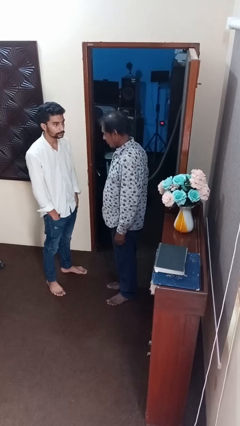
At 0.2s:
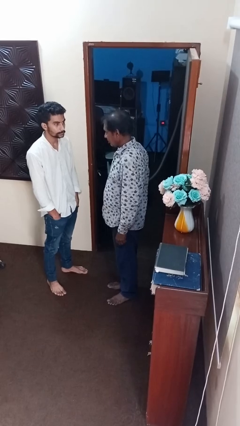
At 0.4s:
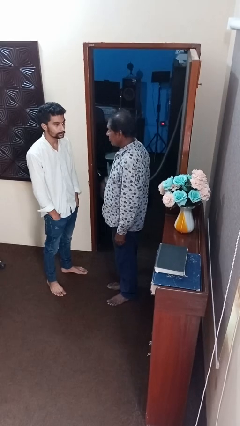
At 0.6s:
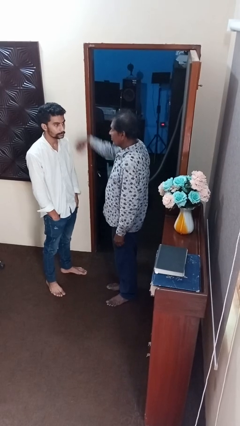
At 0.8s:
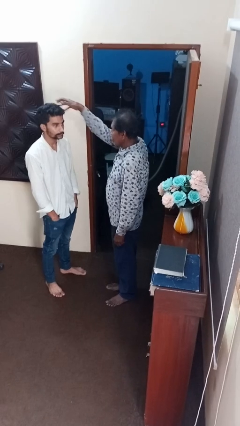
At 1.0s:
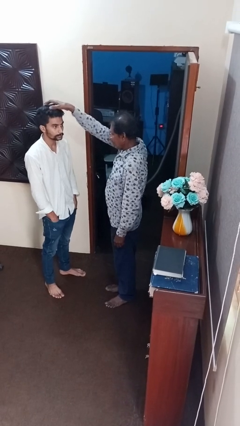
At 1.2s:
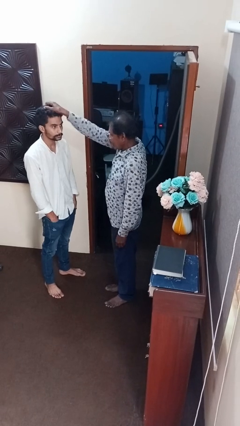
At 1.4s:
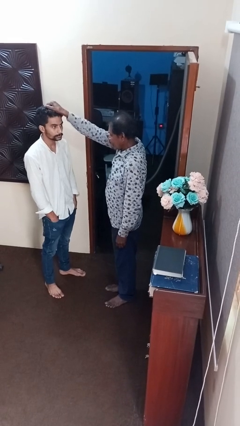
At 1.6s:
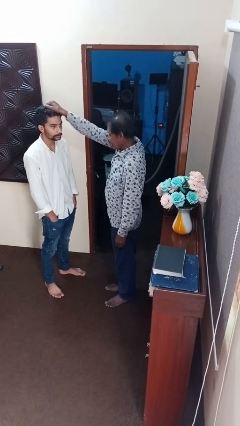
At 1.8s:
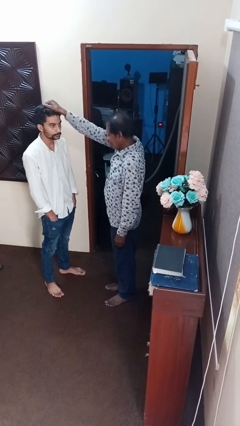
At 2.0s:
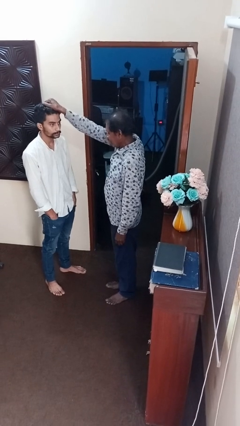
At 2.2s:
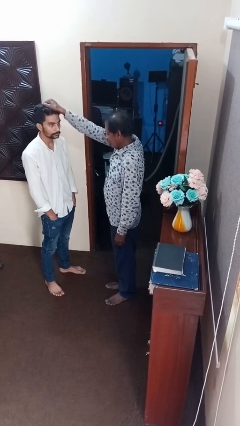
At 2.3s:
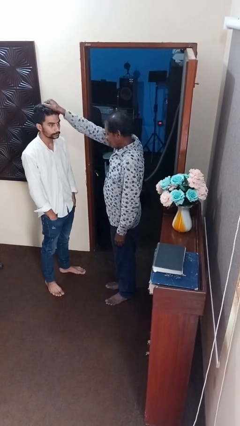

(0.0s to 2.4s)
person grabs person by hair

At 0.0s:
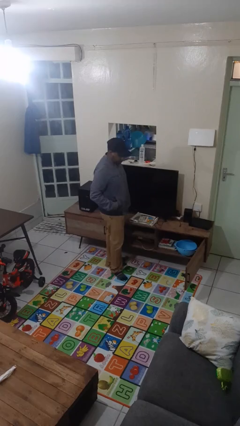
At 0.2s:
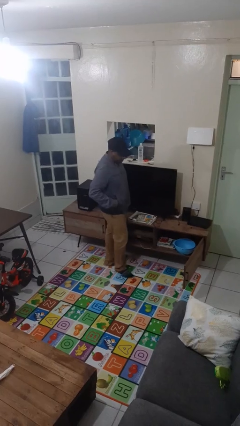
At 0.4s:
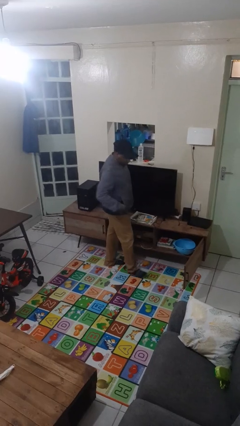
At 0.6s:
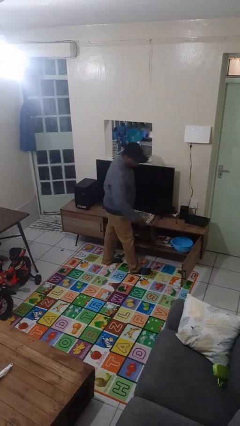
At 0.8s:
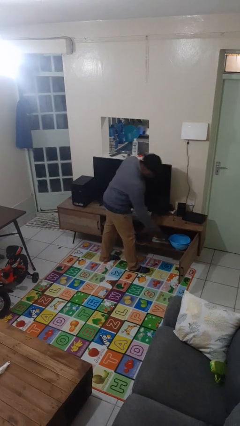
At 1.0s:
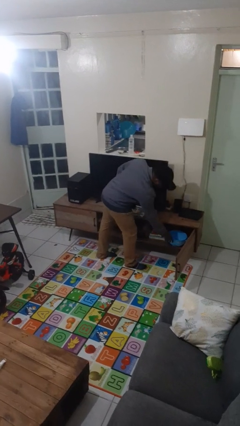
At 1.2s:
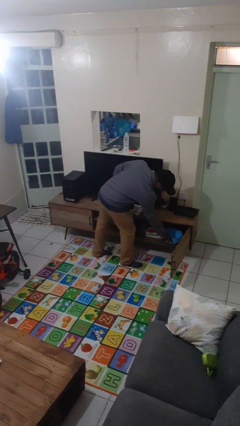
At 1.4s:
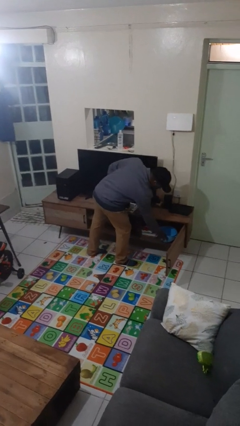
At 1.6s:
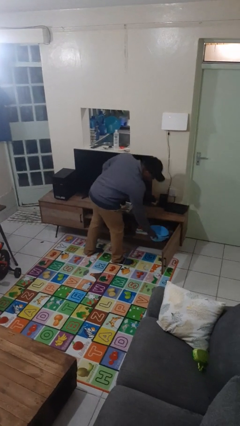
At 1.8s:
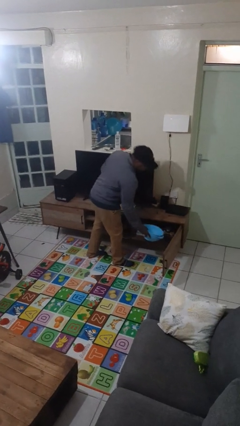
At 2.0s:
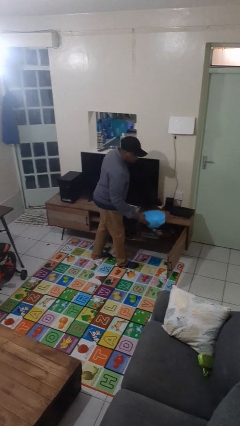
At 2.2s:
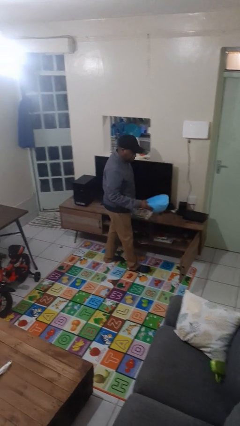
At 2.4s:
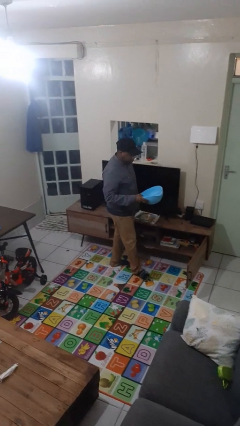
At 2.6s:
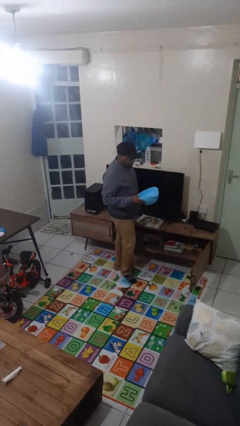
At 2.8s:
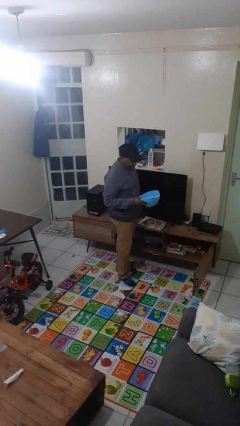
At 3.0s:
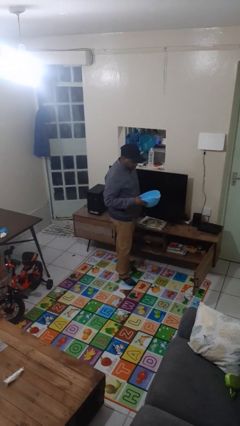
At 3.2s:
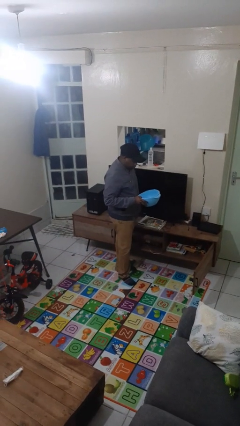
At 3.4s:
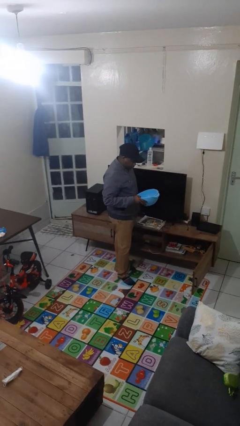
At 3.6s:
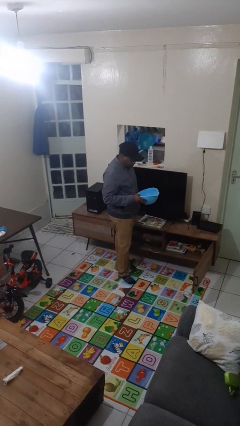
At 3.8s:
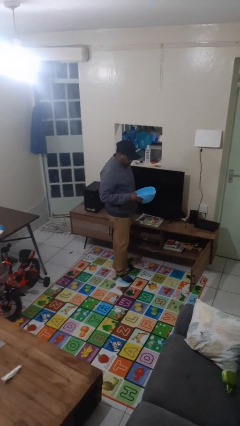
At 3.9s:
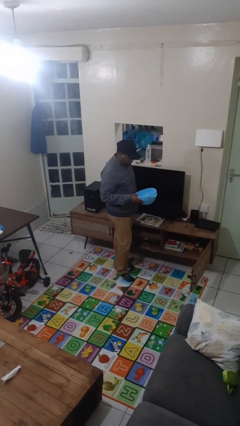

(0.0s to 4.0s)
person picks up object from cabinet

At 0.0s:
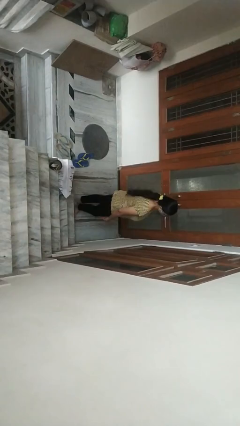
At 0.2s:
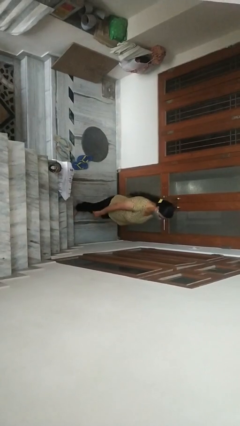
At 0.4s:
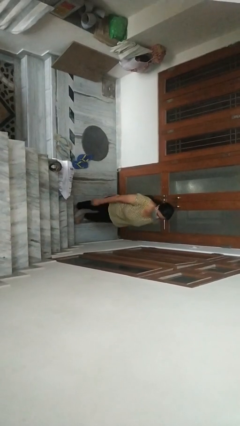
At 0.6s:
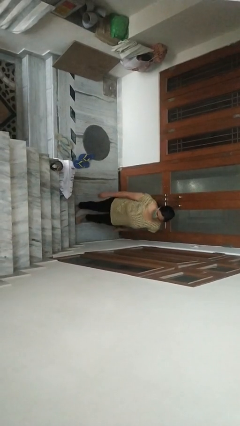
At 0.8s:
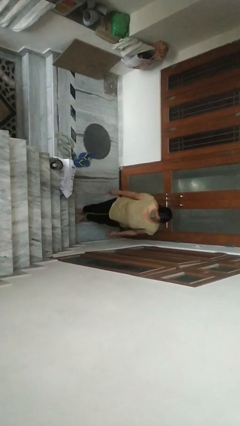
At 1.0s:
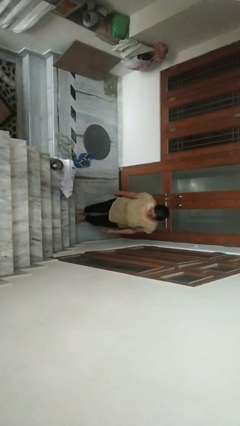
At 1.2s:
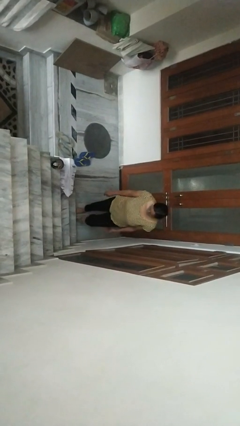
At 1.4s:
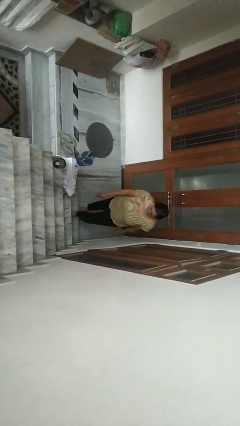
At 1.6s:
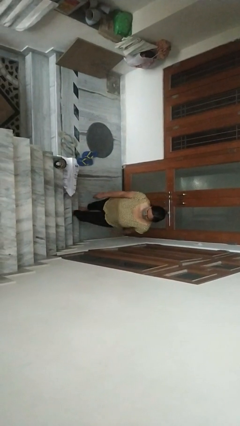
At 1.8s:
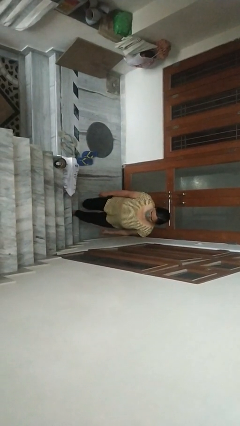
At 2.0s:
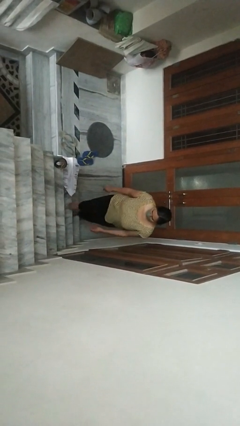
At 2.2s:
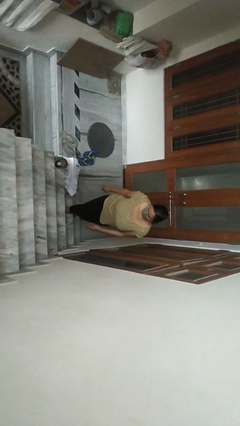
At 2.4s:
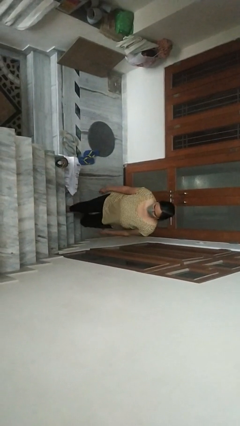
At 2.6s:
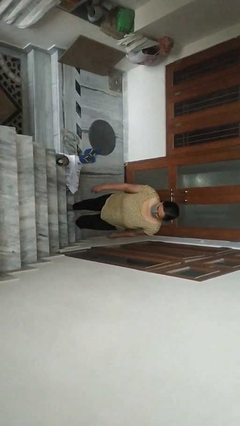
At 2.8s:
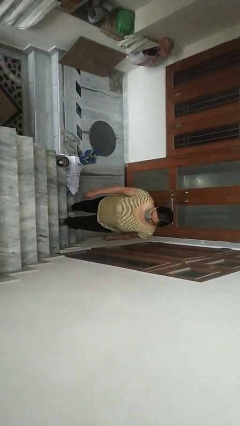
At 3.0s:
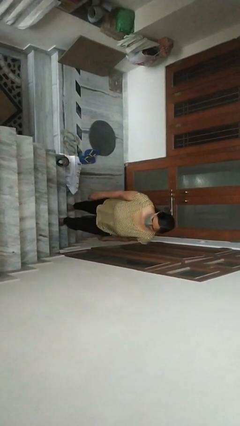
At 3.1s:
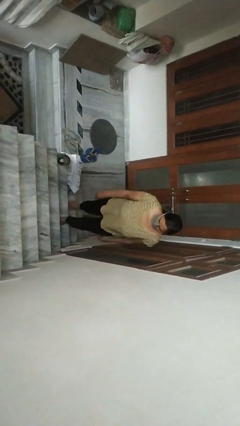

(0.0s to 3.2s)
person climbs up stairs

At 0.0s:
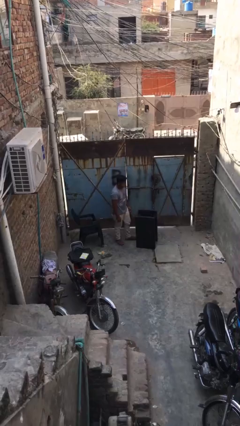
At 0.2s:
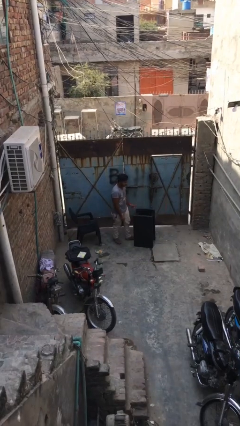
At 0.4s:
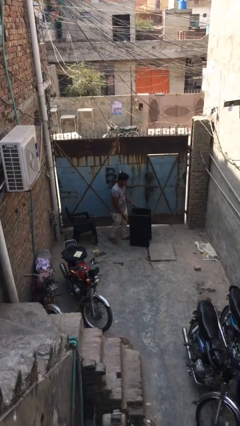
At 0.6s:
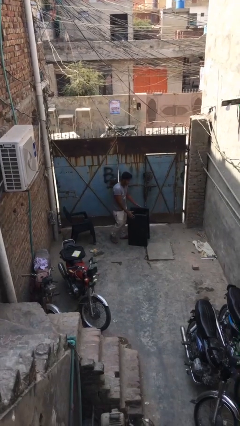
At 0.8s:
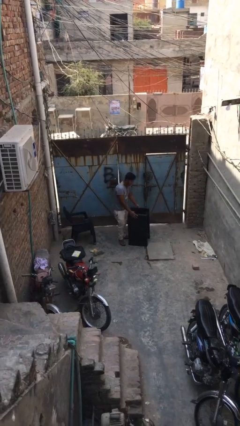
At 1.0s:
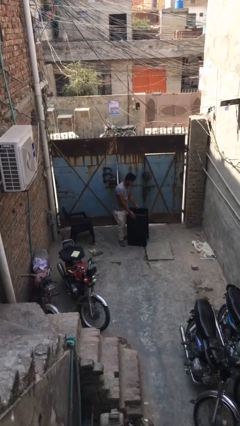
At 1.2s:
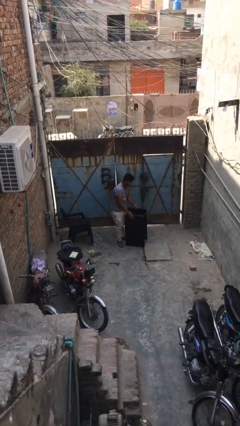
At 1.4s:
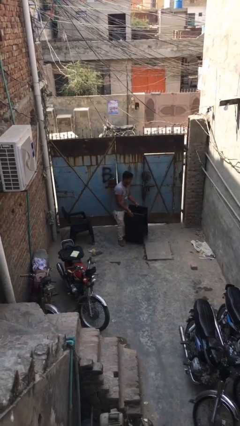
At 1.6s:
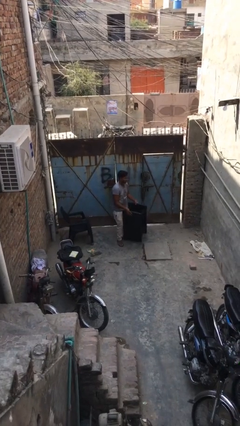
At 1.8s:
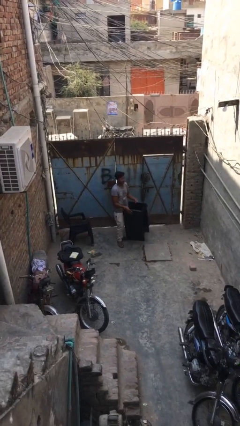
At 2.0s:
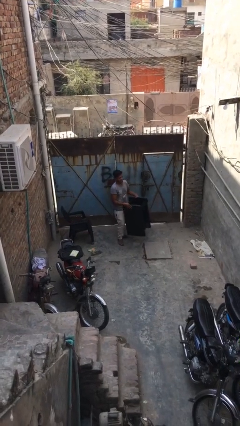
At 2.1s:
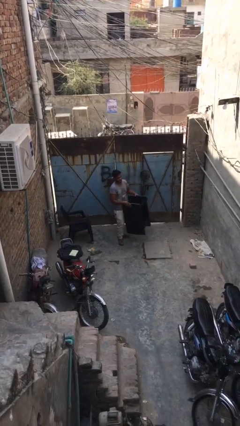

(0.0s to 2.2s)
person picks up object from floor

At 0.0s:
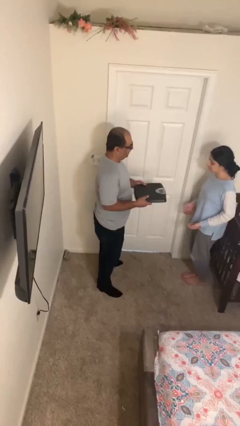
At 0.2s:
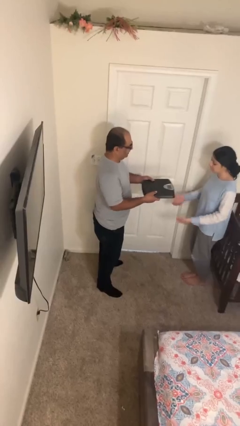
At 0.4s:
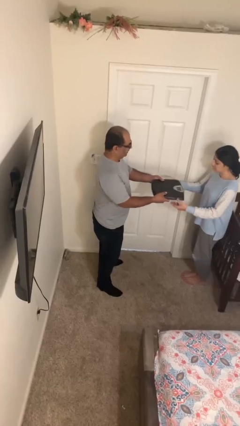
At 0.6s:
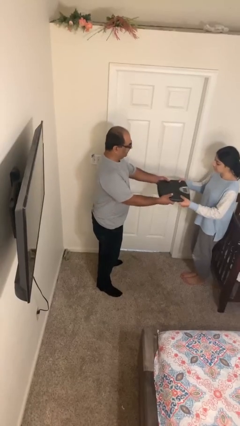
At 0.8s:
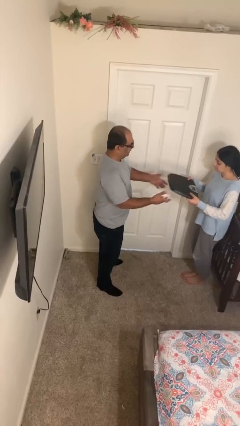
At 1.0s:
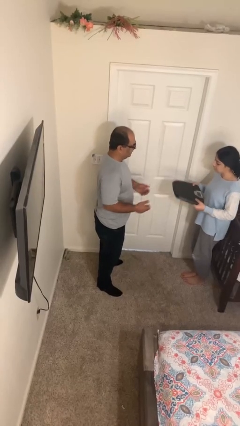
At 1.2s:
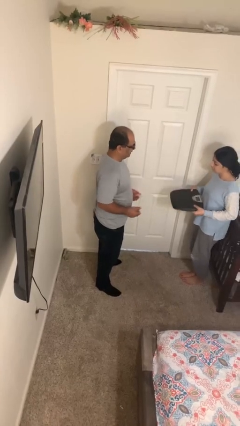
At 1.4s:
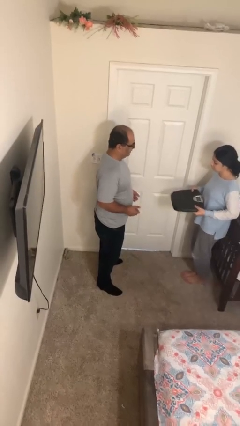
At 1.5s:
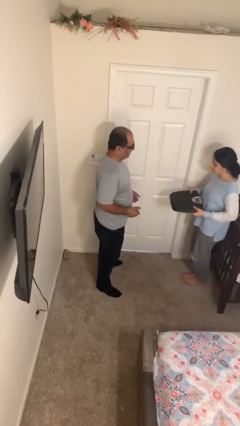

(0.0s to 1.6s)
person transfers object to person

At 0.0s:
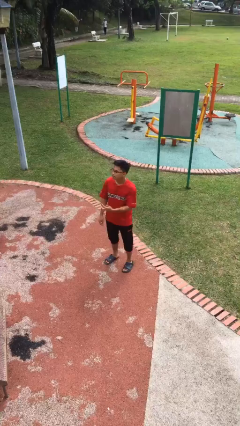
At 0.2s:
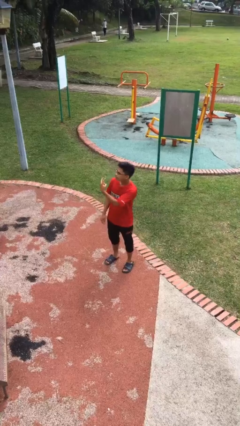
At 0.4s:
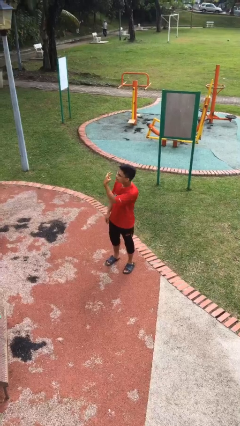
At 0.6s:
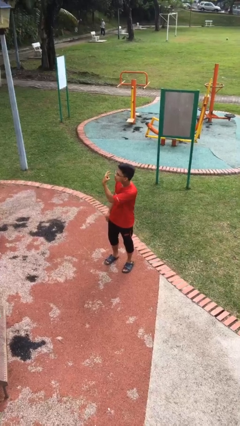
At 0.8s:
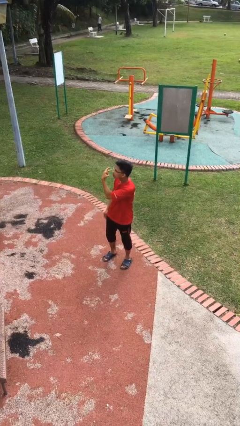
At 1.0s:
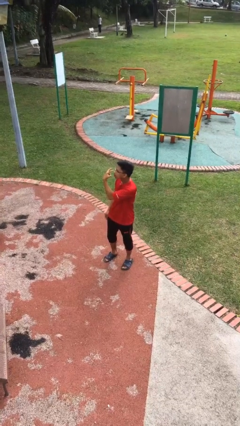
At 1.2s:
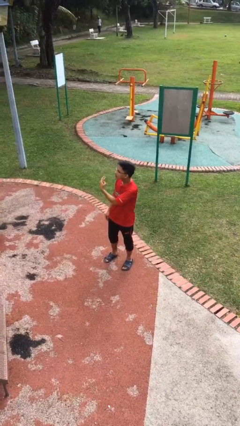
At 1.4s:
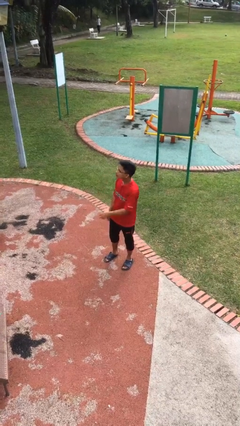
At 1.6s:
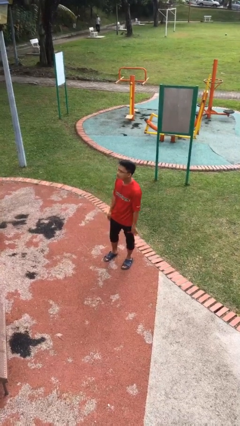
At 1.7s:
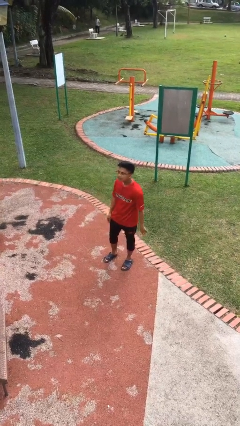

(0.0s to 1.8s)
person gestures watch closely

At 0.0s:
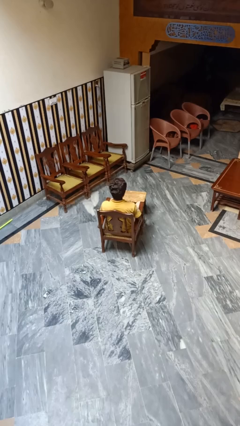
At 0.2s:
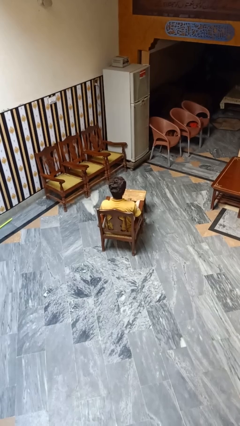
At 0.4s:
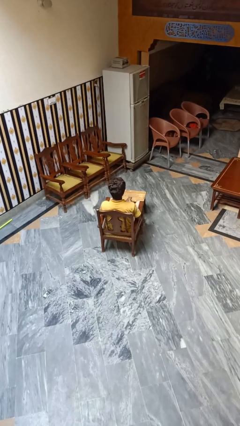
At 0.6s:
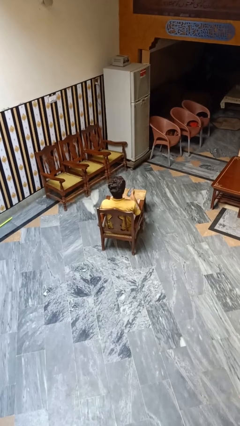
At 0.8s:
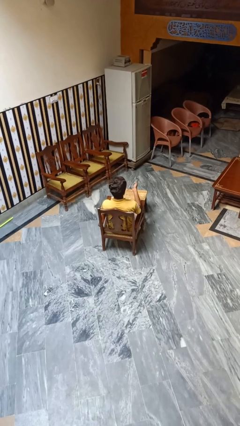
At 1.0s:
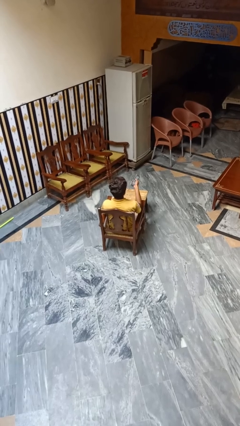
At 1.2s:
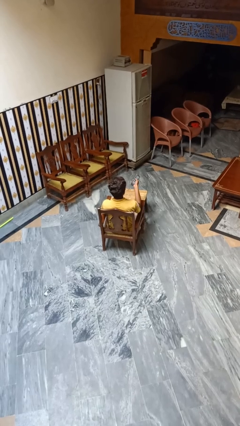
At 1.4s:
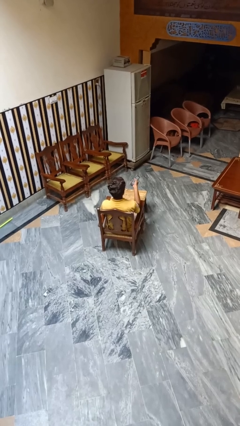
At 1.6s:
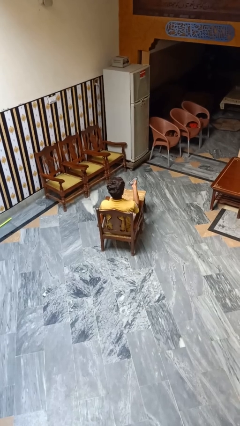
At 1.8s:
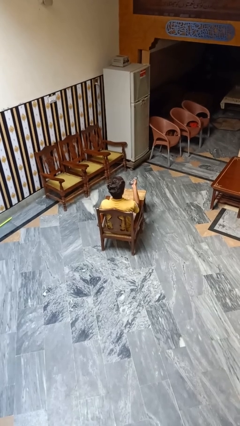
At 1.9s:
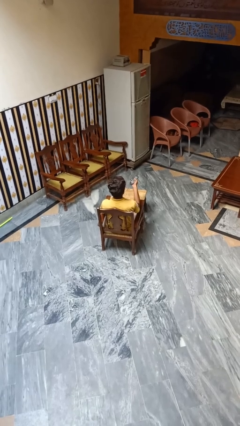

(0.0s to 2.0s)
person uses television remote

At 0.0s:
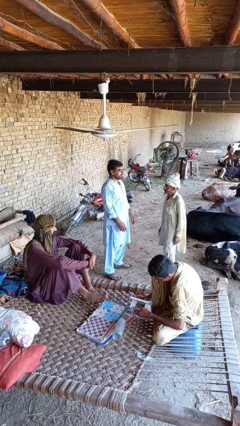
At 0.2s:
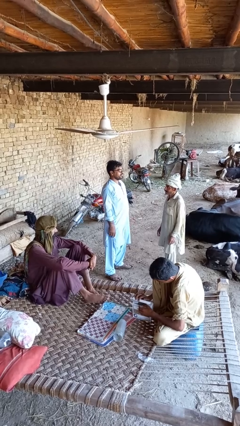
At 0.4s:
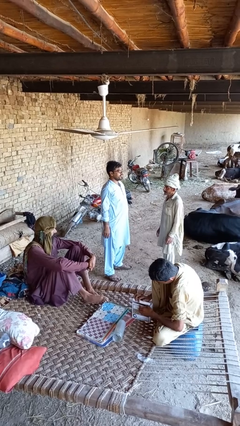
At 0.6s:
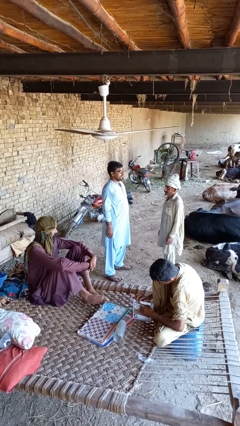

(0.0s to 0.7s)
person shoves person
